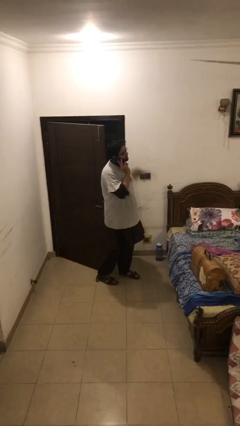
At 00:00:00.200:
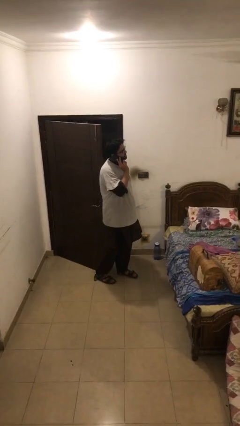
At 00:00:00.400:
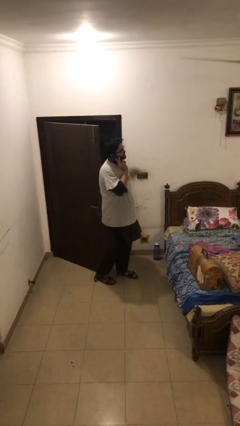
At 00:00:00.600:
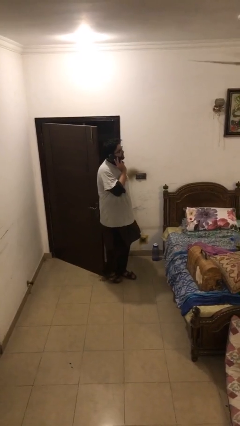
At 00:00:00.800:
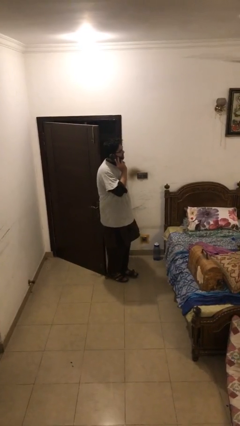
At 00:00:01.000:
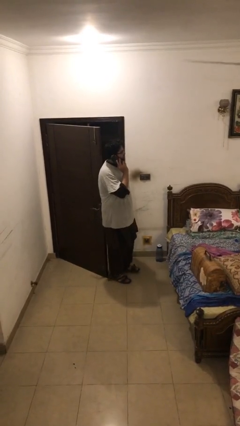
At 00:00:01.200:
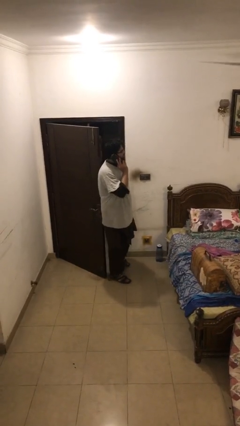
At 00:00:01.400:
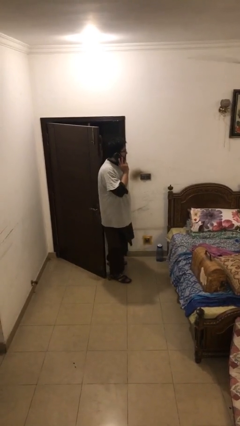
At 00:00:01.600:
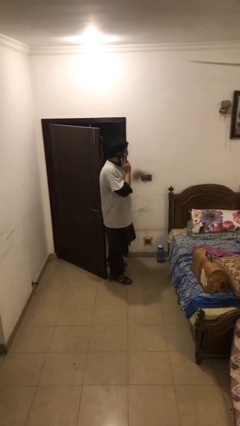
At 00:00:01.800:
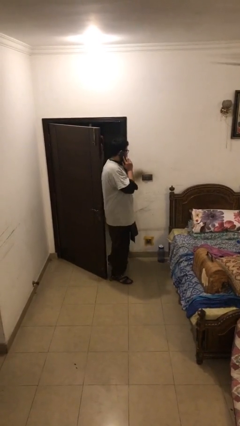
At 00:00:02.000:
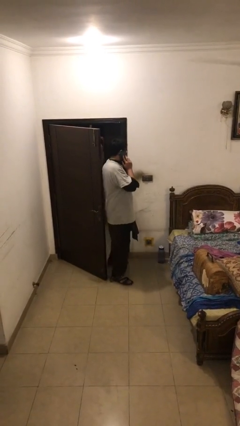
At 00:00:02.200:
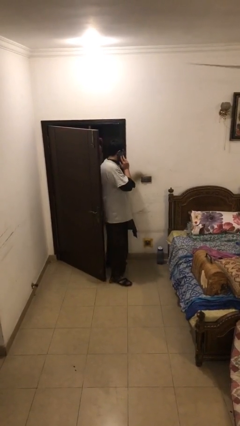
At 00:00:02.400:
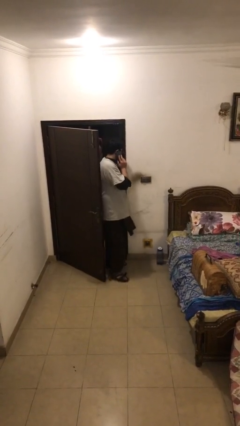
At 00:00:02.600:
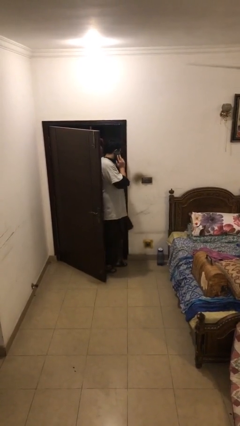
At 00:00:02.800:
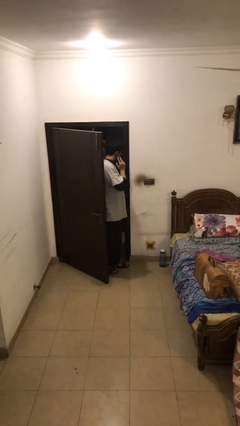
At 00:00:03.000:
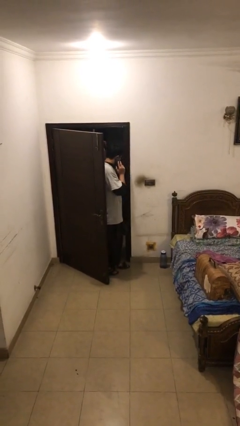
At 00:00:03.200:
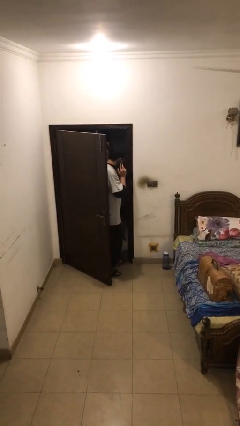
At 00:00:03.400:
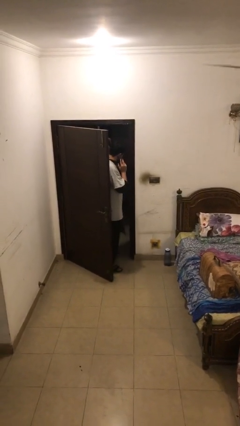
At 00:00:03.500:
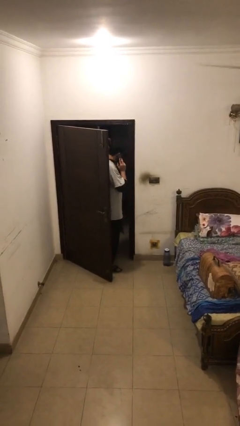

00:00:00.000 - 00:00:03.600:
person exits scene through structure

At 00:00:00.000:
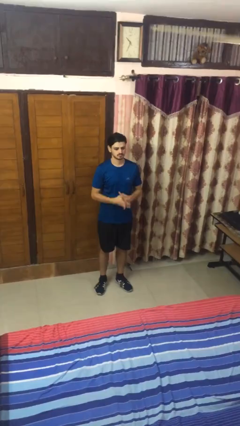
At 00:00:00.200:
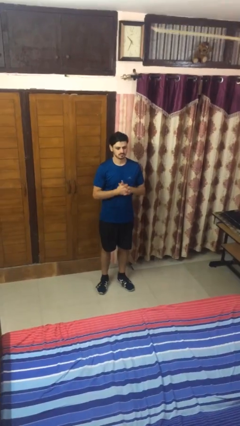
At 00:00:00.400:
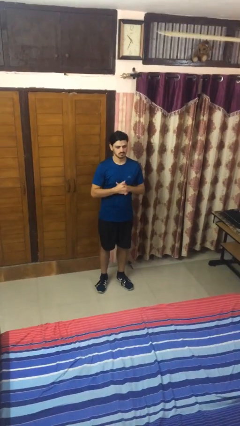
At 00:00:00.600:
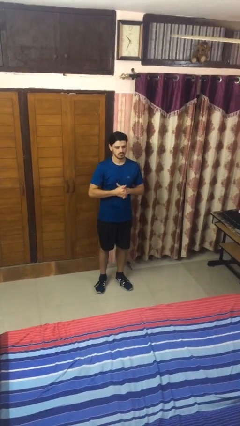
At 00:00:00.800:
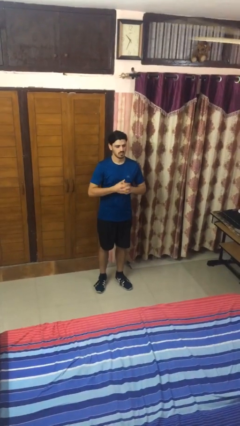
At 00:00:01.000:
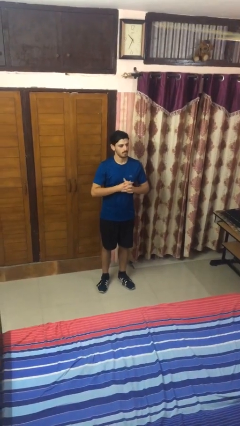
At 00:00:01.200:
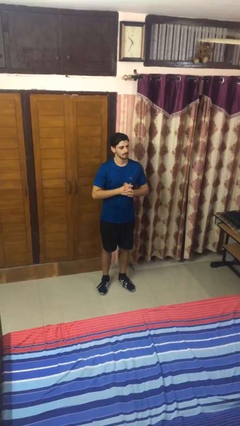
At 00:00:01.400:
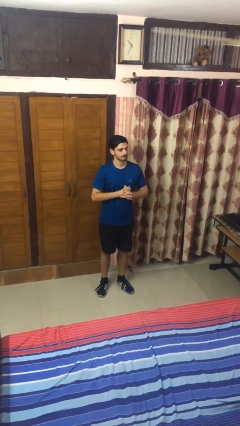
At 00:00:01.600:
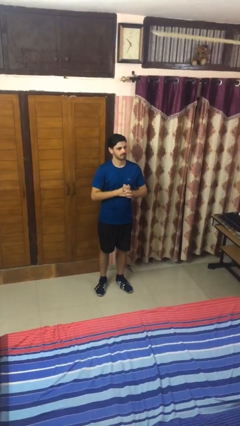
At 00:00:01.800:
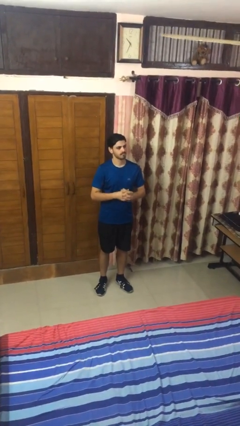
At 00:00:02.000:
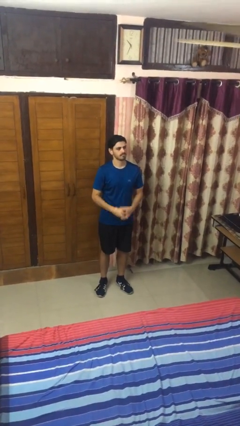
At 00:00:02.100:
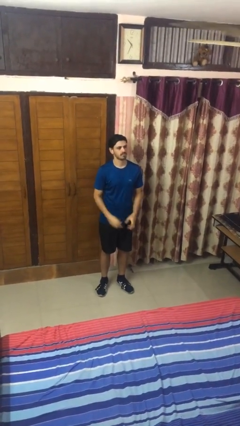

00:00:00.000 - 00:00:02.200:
person cracks knuckles

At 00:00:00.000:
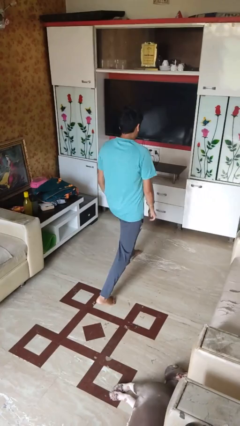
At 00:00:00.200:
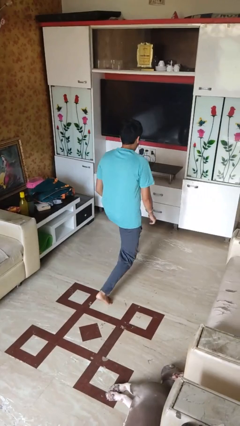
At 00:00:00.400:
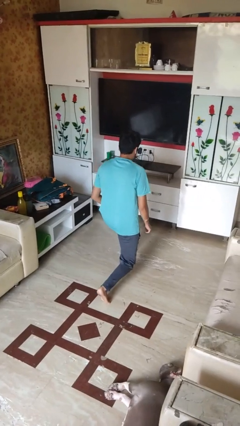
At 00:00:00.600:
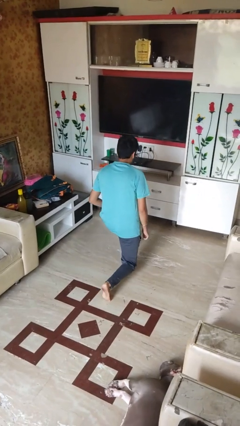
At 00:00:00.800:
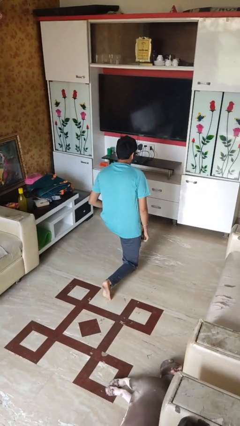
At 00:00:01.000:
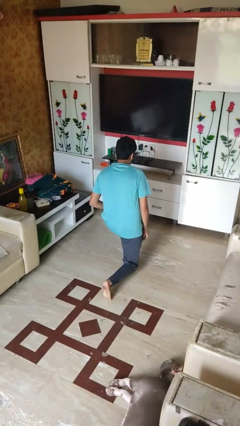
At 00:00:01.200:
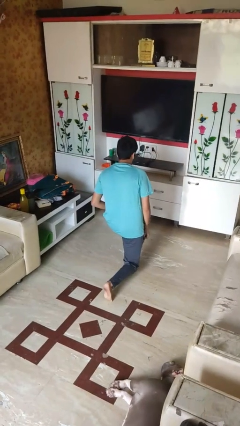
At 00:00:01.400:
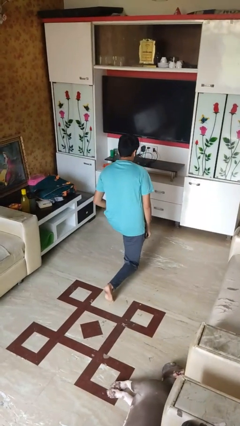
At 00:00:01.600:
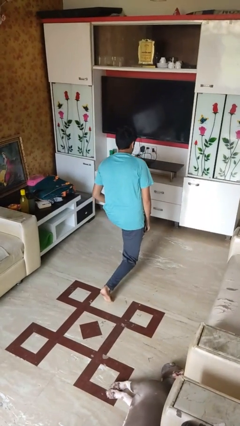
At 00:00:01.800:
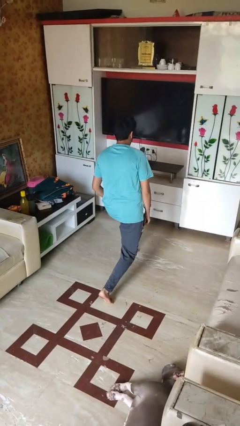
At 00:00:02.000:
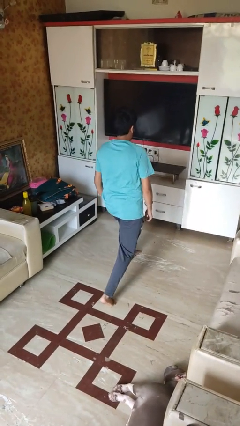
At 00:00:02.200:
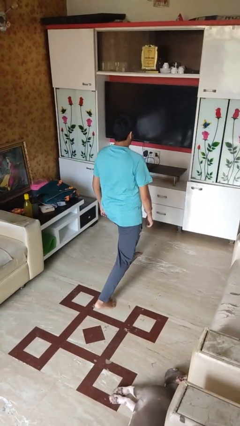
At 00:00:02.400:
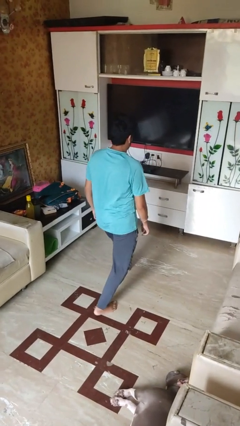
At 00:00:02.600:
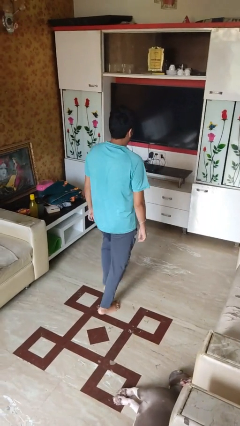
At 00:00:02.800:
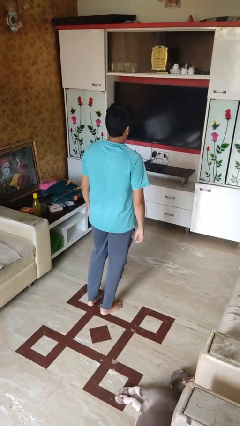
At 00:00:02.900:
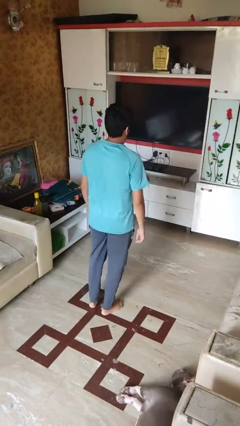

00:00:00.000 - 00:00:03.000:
person exercises with lunges

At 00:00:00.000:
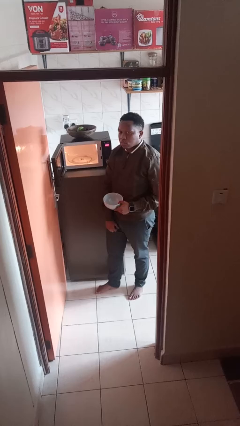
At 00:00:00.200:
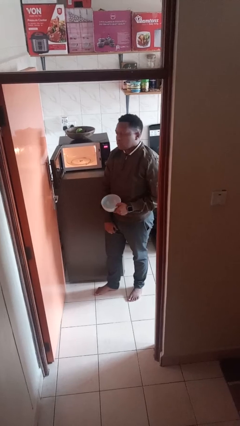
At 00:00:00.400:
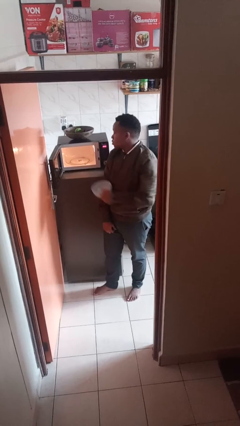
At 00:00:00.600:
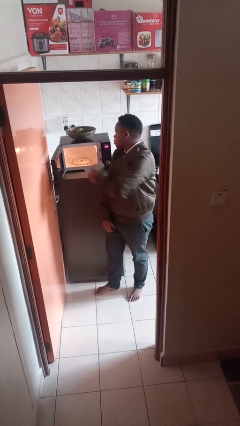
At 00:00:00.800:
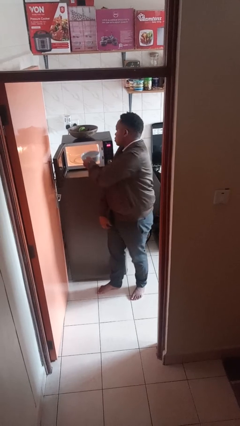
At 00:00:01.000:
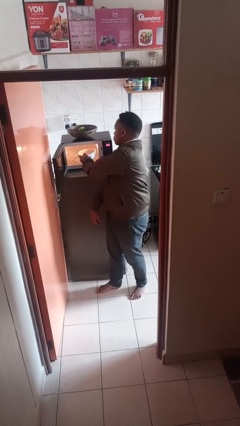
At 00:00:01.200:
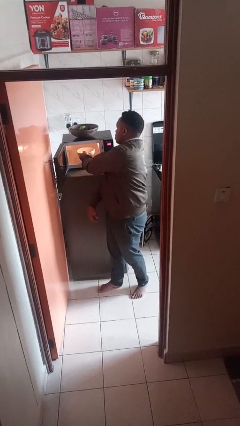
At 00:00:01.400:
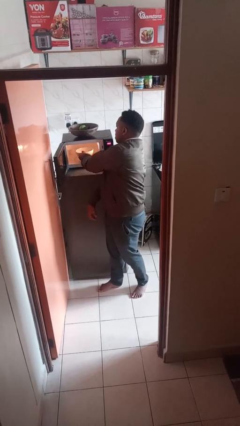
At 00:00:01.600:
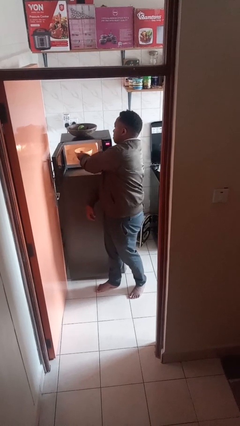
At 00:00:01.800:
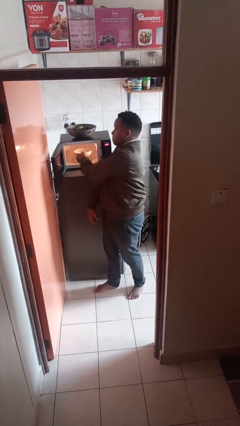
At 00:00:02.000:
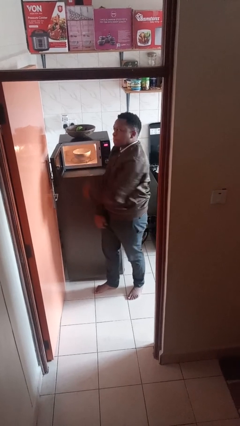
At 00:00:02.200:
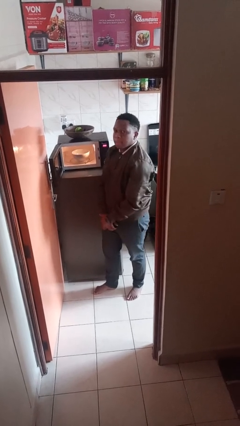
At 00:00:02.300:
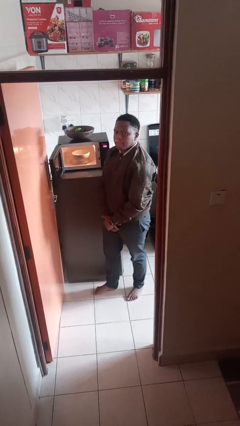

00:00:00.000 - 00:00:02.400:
person puts object into microwave

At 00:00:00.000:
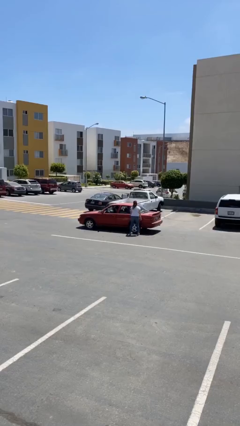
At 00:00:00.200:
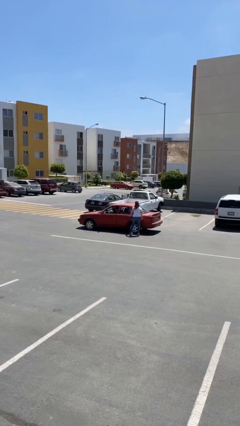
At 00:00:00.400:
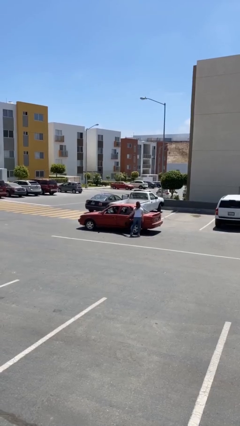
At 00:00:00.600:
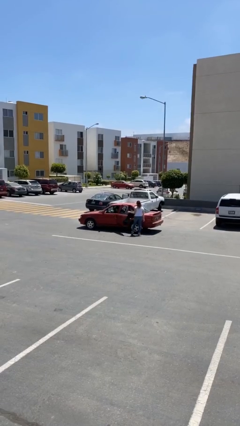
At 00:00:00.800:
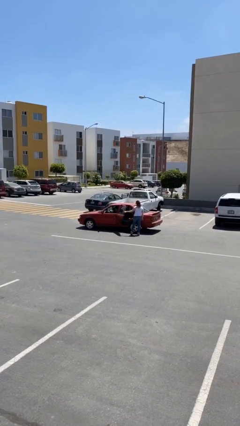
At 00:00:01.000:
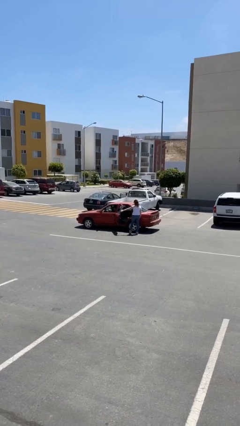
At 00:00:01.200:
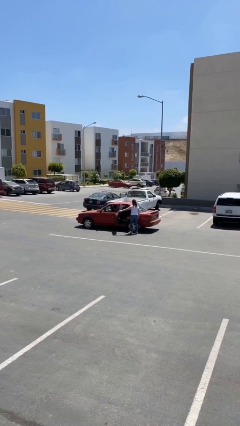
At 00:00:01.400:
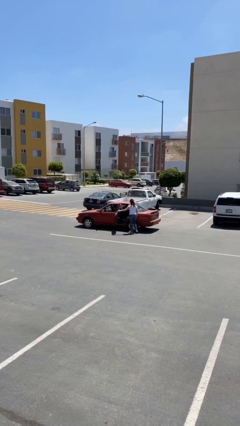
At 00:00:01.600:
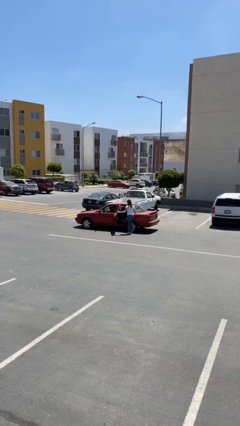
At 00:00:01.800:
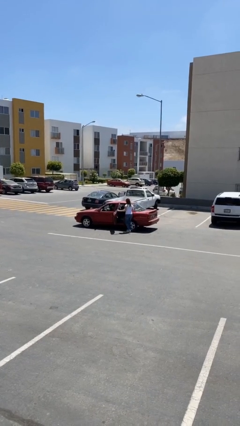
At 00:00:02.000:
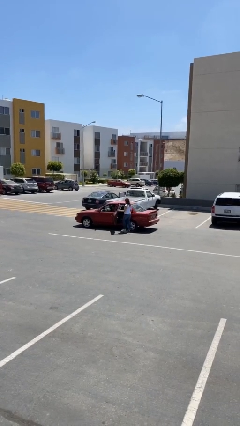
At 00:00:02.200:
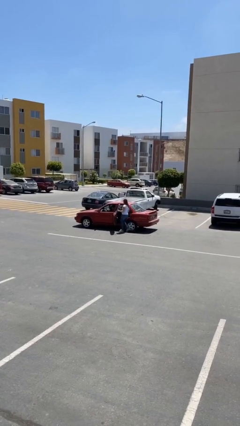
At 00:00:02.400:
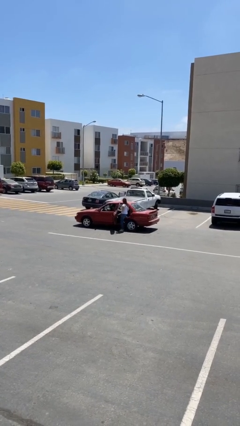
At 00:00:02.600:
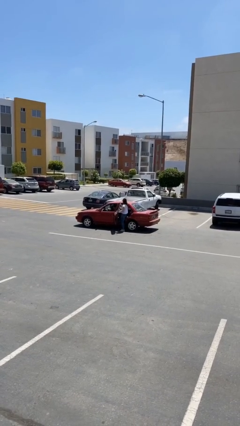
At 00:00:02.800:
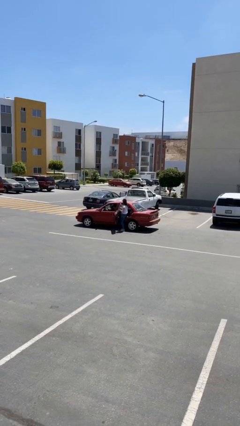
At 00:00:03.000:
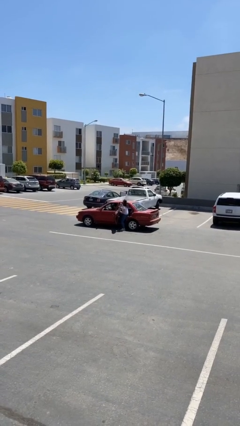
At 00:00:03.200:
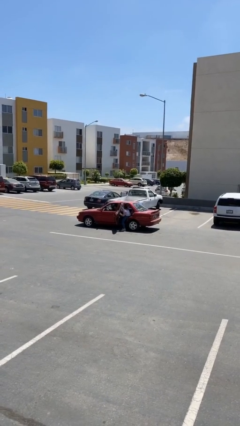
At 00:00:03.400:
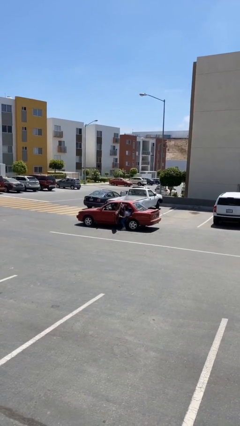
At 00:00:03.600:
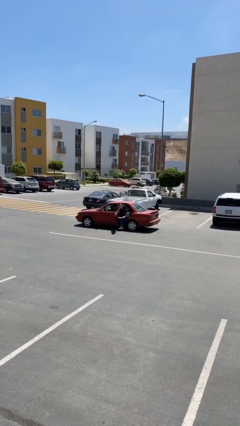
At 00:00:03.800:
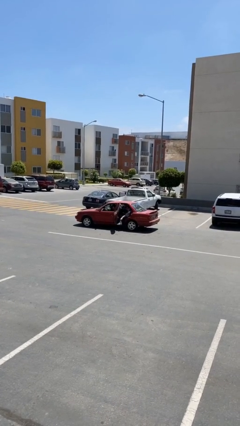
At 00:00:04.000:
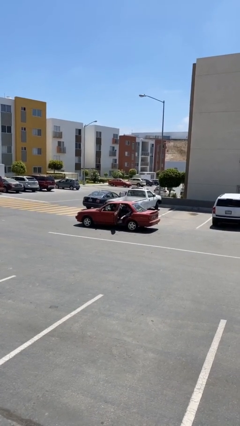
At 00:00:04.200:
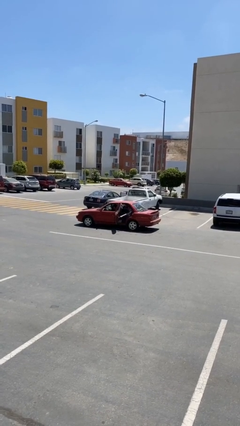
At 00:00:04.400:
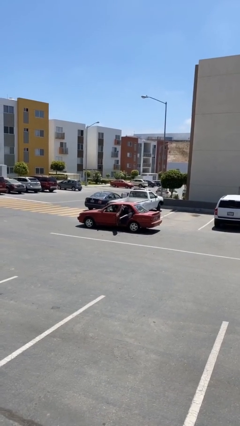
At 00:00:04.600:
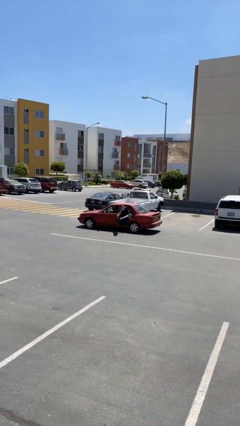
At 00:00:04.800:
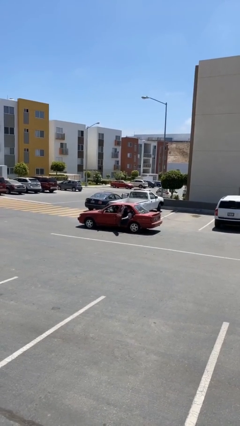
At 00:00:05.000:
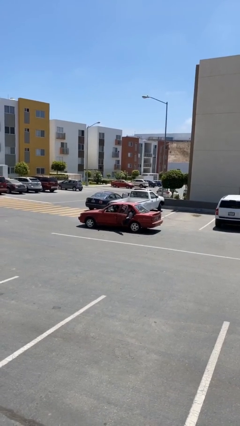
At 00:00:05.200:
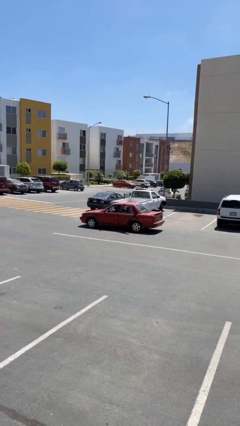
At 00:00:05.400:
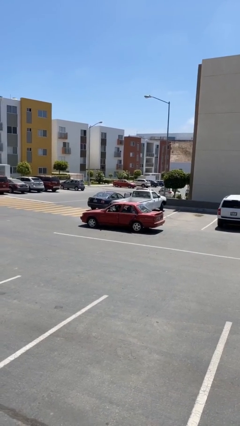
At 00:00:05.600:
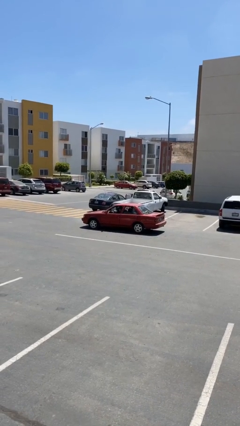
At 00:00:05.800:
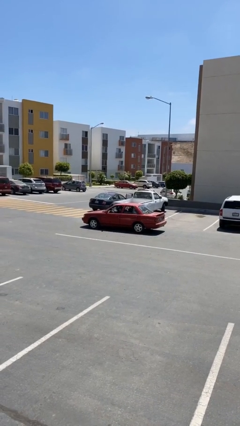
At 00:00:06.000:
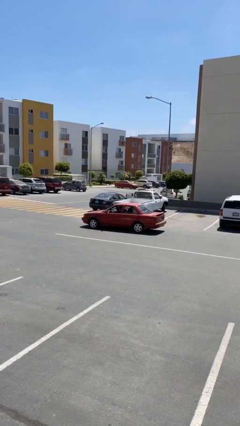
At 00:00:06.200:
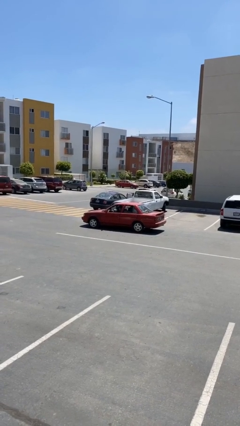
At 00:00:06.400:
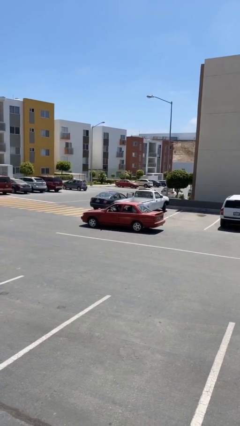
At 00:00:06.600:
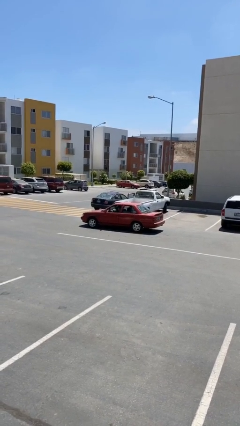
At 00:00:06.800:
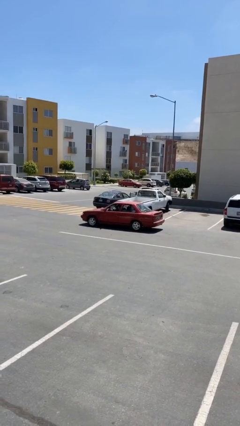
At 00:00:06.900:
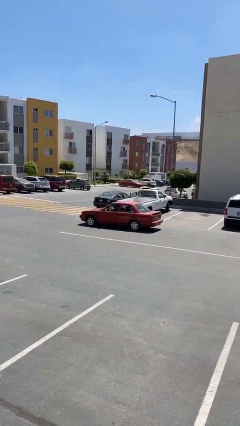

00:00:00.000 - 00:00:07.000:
car drops off person
